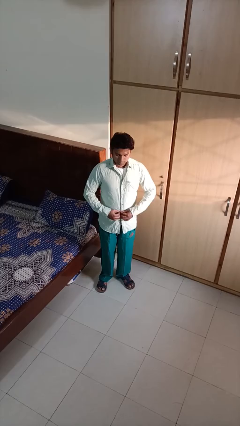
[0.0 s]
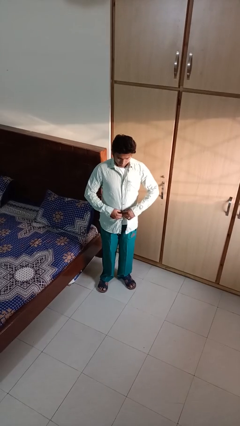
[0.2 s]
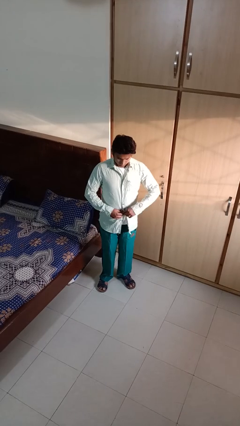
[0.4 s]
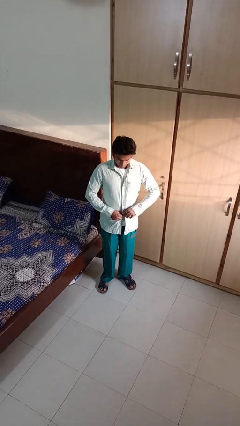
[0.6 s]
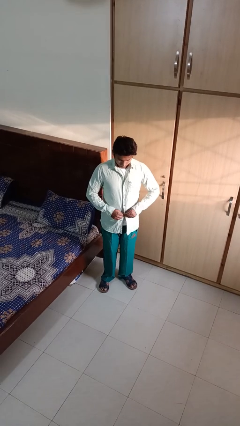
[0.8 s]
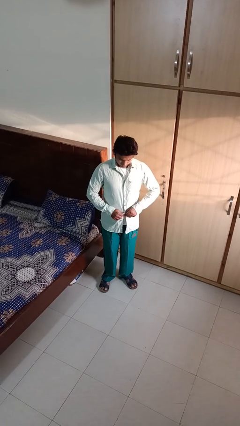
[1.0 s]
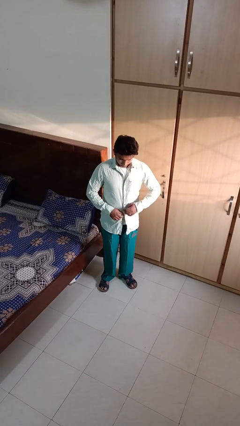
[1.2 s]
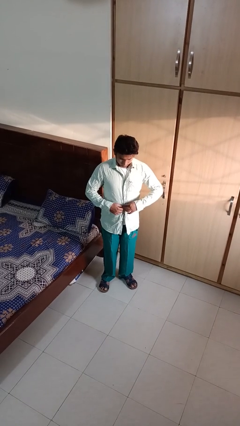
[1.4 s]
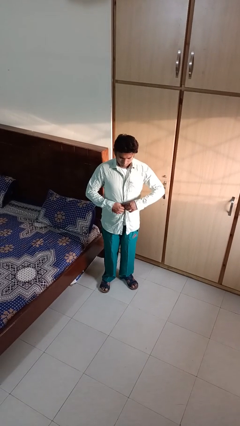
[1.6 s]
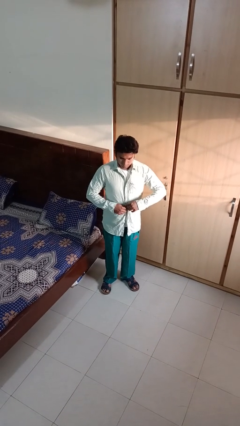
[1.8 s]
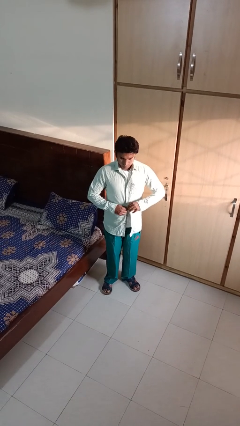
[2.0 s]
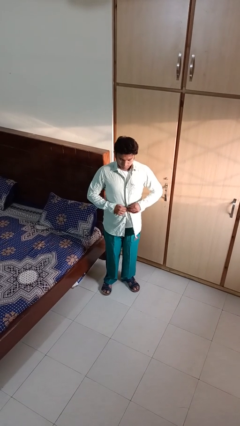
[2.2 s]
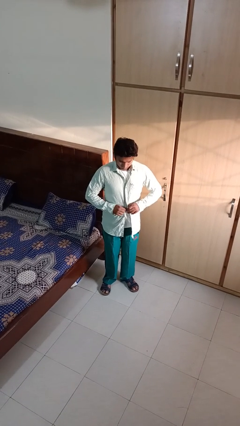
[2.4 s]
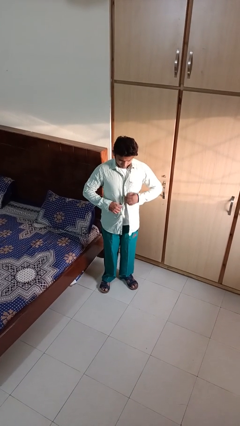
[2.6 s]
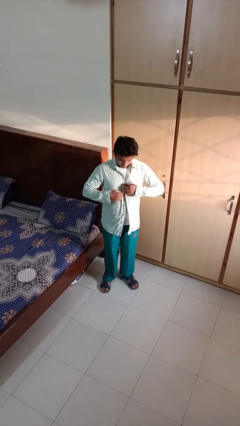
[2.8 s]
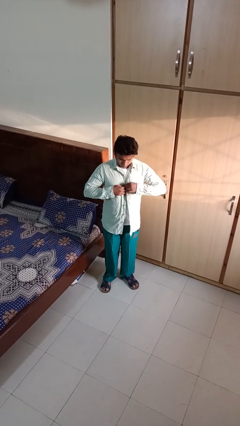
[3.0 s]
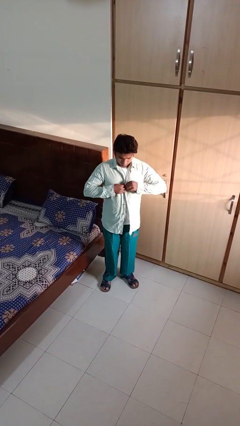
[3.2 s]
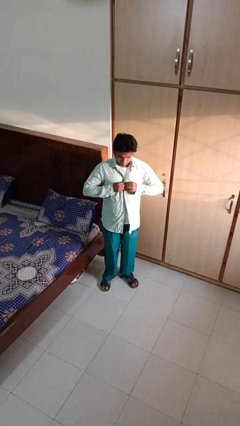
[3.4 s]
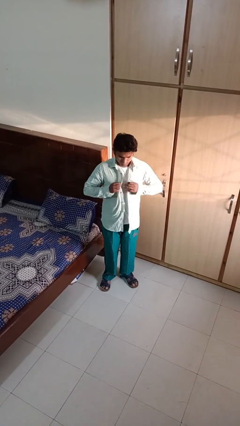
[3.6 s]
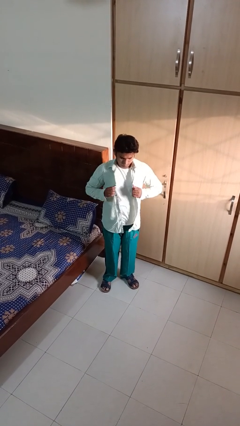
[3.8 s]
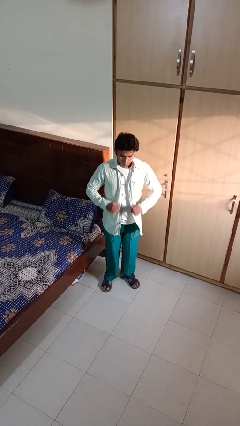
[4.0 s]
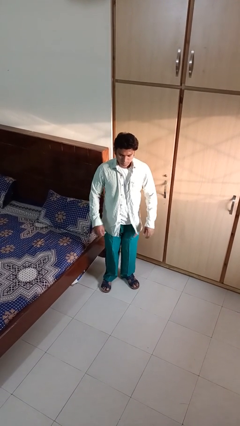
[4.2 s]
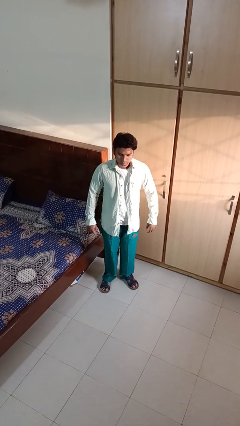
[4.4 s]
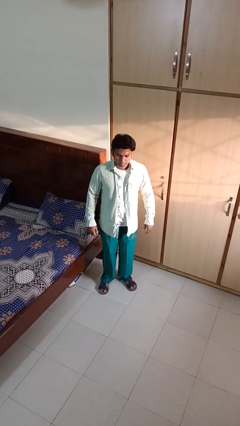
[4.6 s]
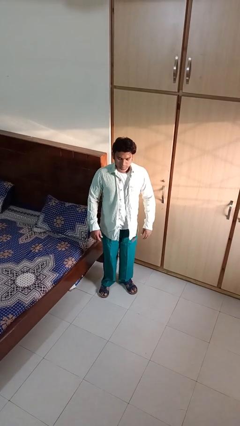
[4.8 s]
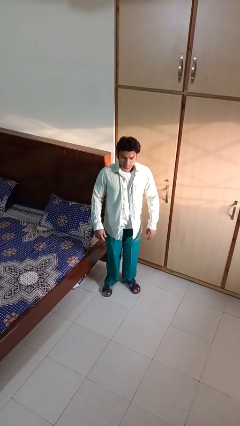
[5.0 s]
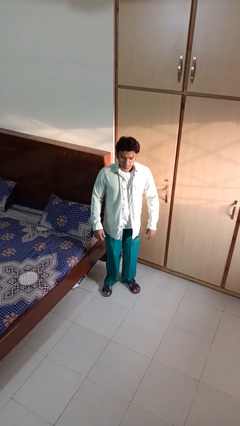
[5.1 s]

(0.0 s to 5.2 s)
person unbuttons shirt

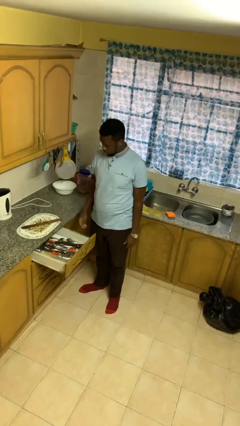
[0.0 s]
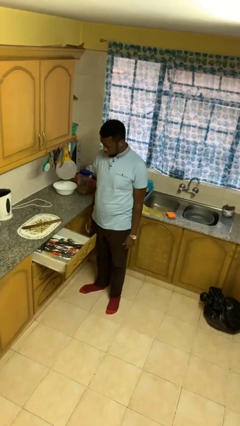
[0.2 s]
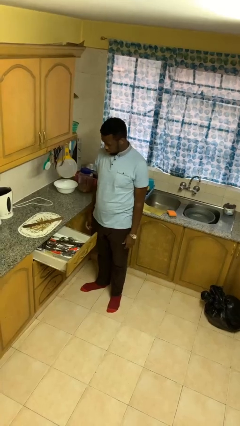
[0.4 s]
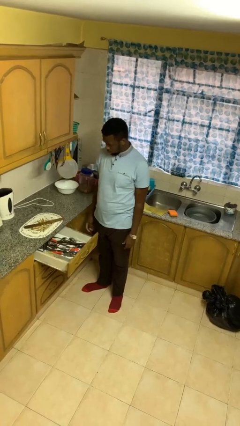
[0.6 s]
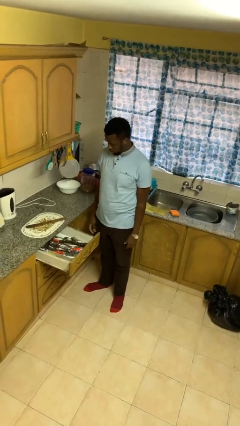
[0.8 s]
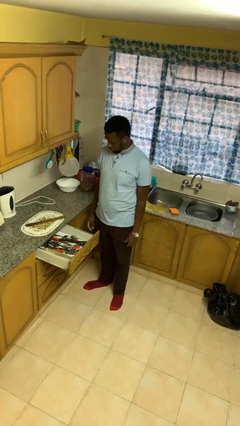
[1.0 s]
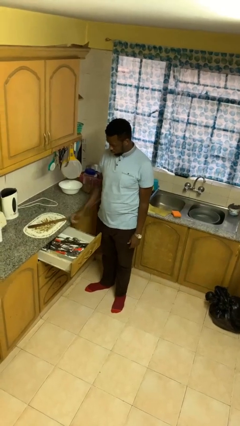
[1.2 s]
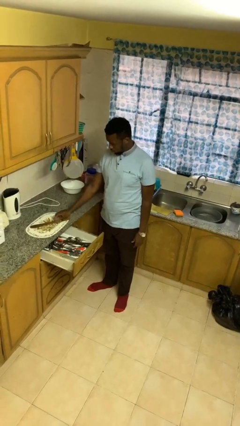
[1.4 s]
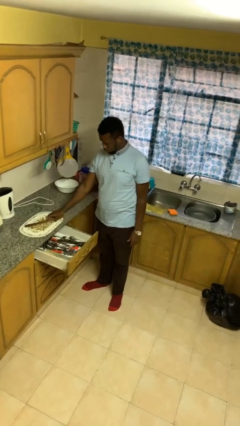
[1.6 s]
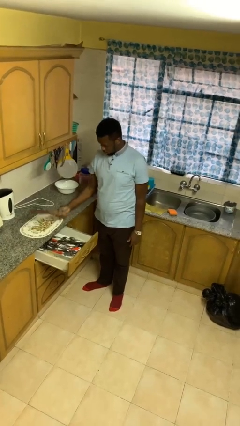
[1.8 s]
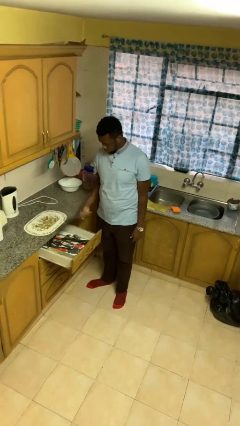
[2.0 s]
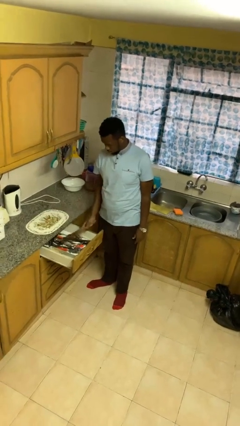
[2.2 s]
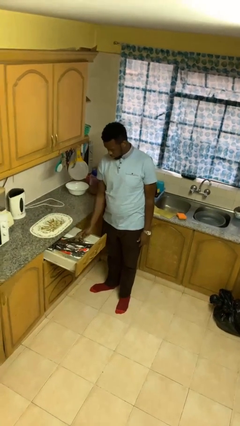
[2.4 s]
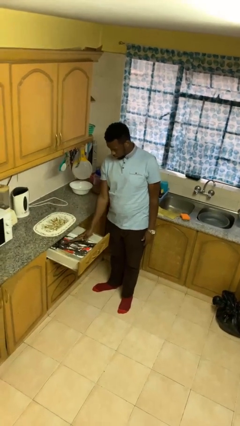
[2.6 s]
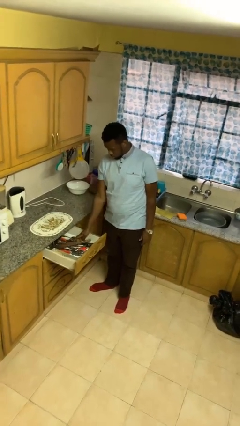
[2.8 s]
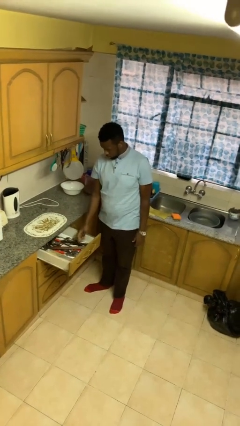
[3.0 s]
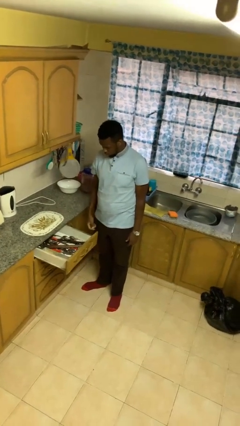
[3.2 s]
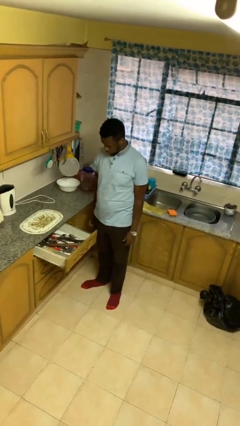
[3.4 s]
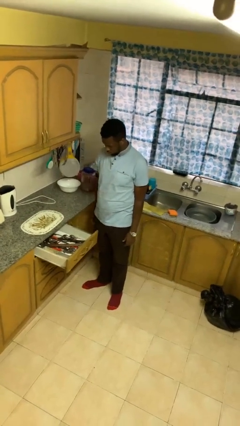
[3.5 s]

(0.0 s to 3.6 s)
person puts object into kitchen drawer

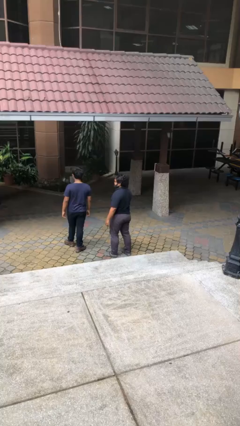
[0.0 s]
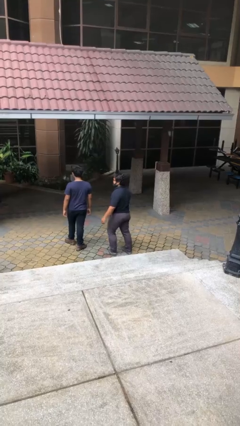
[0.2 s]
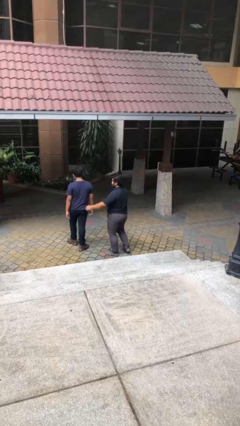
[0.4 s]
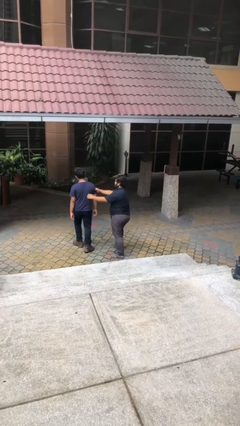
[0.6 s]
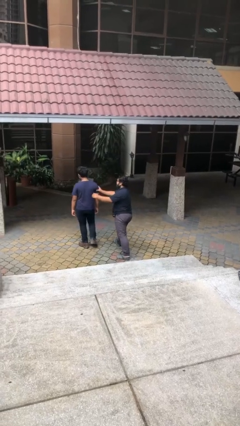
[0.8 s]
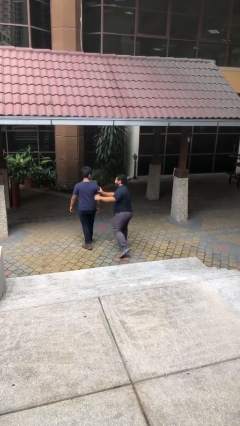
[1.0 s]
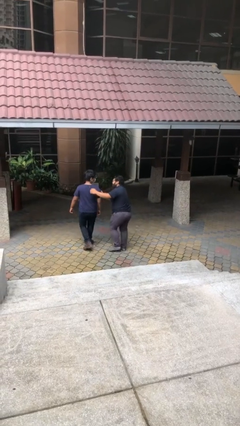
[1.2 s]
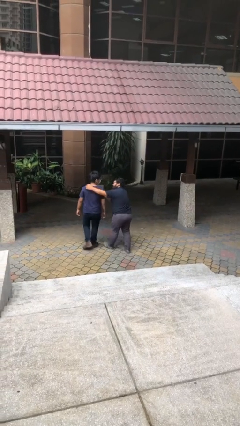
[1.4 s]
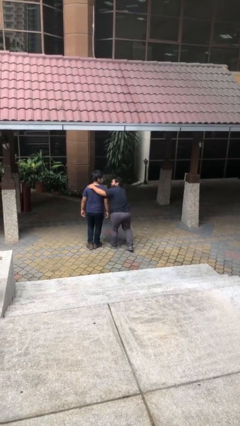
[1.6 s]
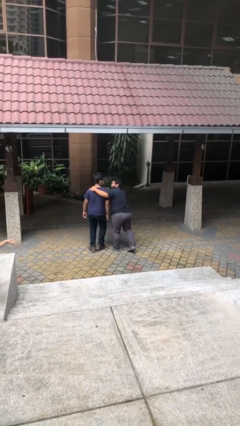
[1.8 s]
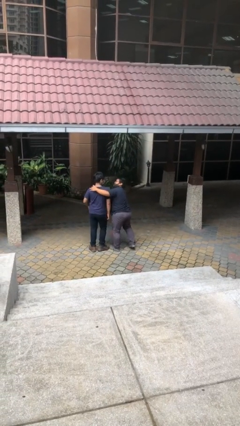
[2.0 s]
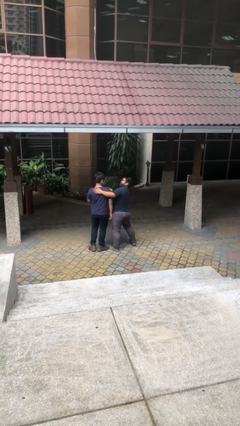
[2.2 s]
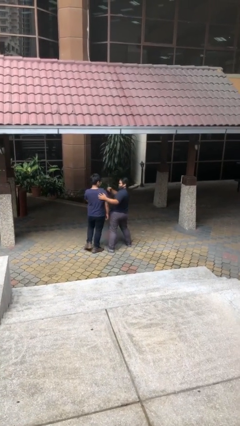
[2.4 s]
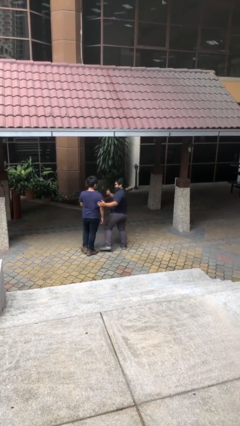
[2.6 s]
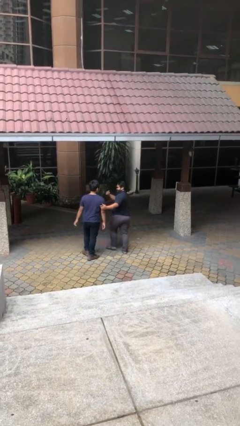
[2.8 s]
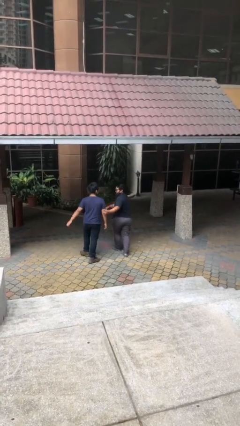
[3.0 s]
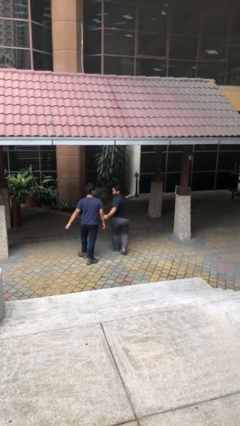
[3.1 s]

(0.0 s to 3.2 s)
person embraces person

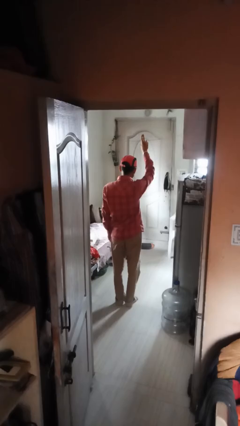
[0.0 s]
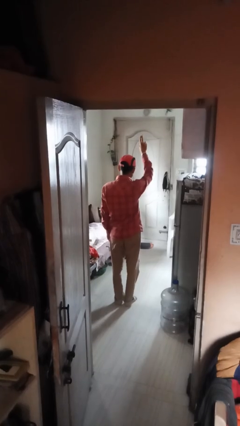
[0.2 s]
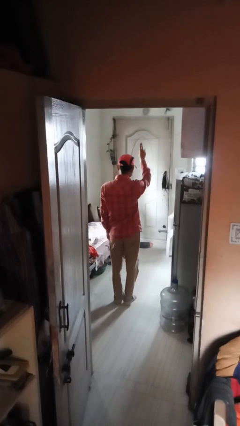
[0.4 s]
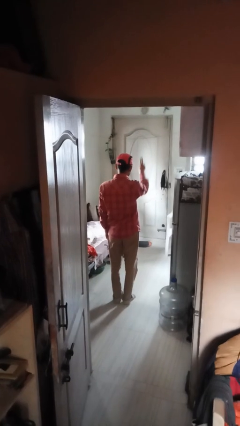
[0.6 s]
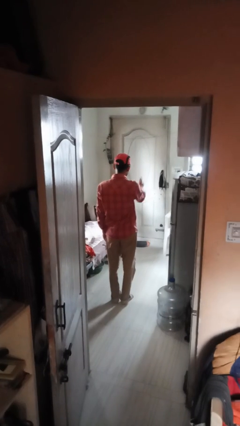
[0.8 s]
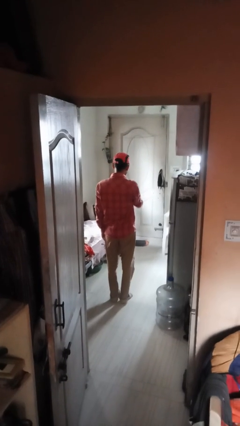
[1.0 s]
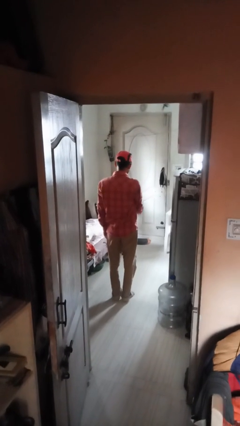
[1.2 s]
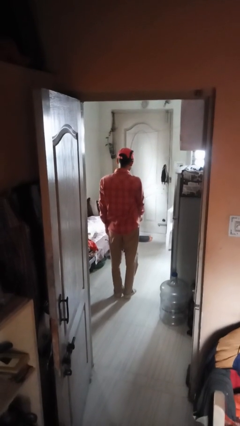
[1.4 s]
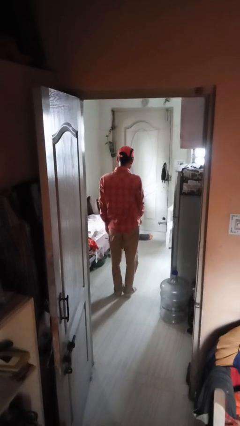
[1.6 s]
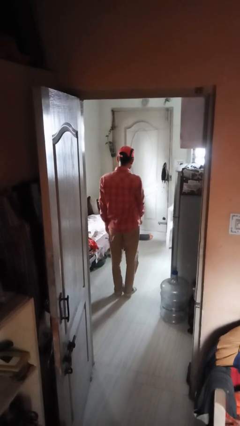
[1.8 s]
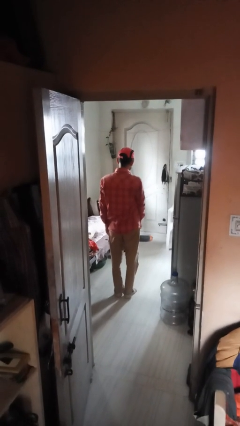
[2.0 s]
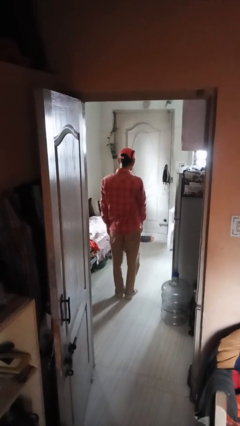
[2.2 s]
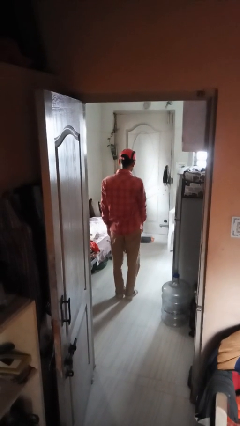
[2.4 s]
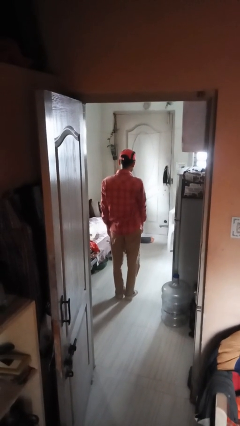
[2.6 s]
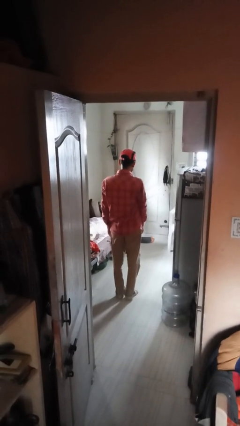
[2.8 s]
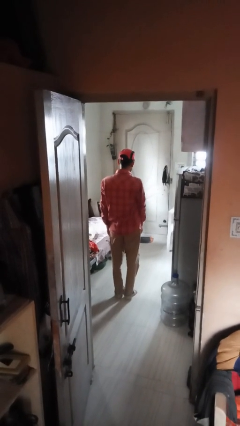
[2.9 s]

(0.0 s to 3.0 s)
person gestures swipe down

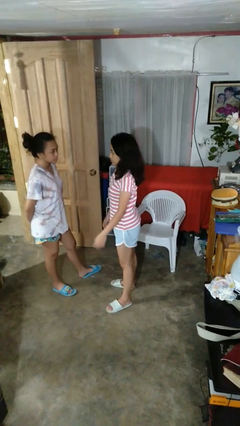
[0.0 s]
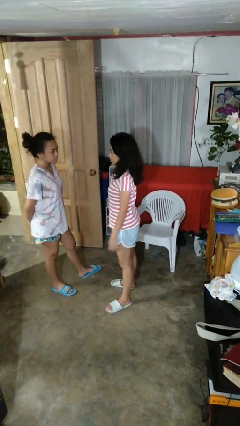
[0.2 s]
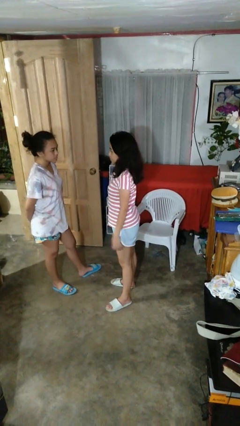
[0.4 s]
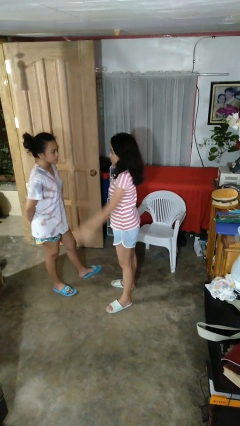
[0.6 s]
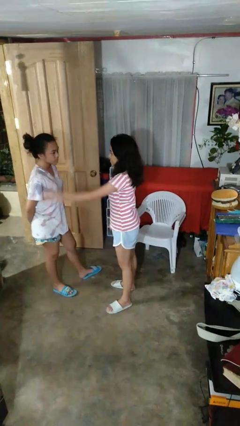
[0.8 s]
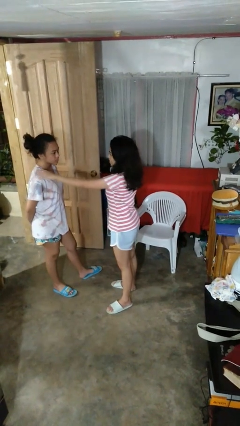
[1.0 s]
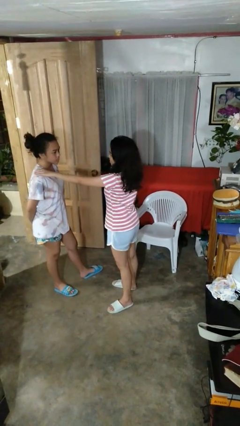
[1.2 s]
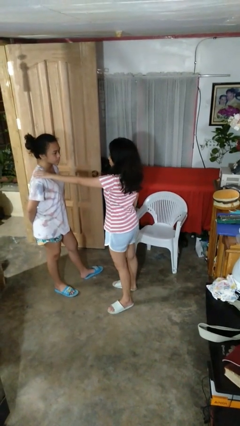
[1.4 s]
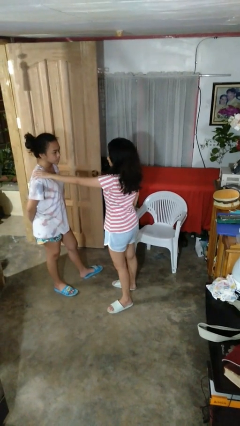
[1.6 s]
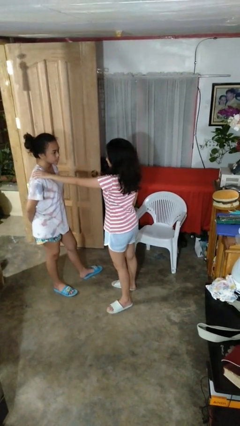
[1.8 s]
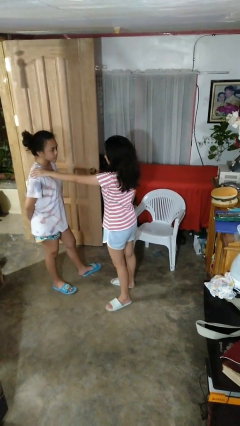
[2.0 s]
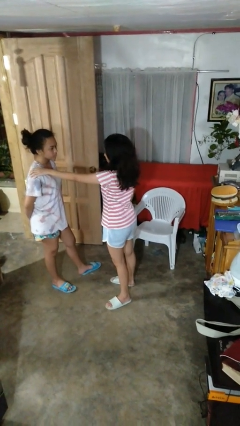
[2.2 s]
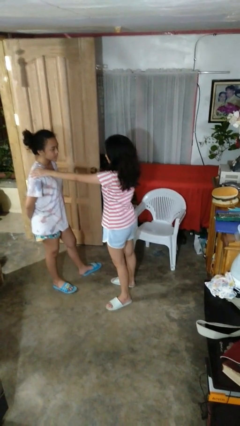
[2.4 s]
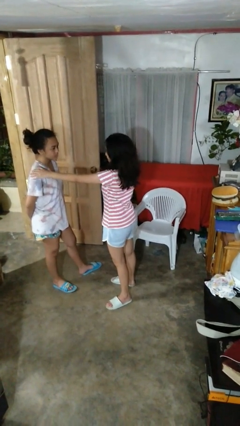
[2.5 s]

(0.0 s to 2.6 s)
person pounds shoulders of person

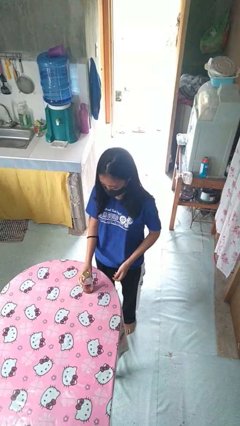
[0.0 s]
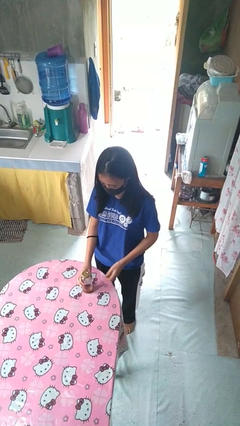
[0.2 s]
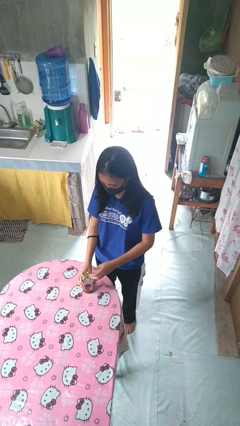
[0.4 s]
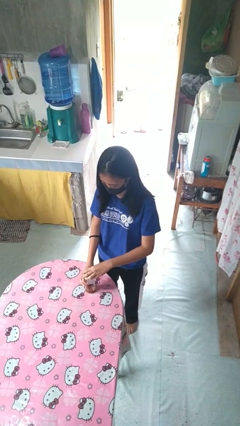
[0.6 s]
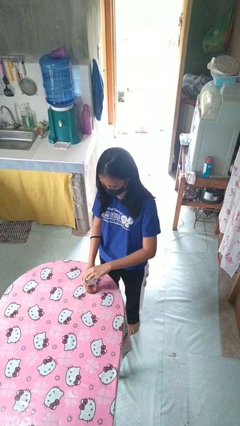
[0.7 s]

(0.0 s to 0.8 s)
person opens jar
